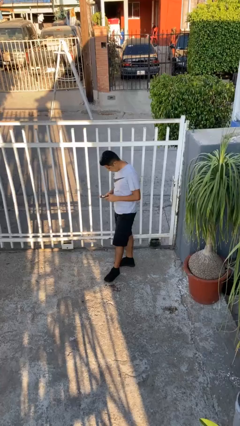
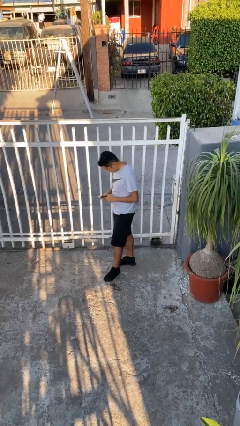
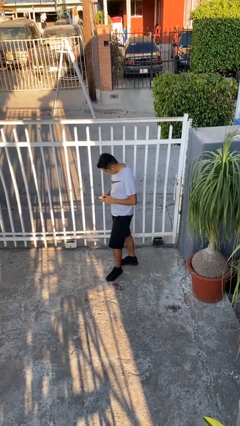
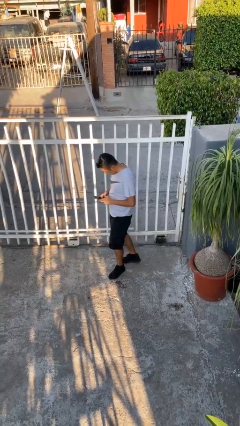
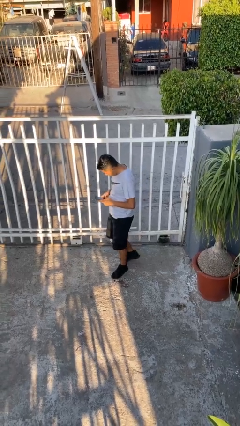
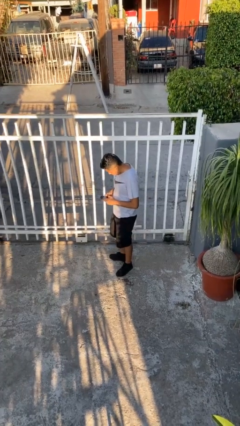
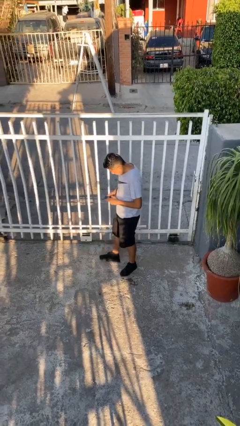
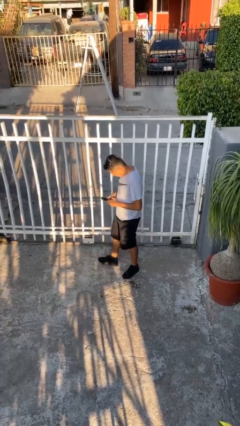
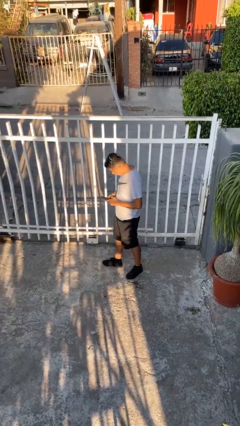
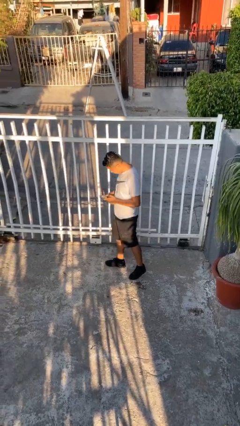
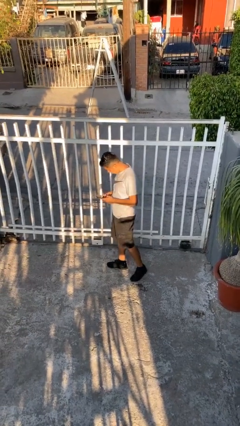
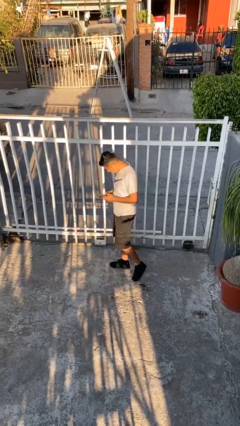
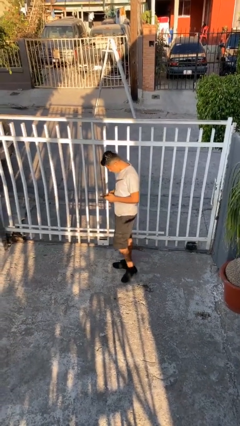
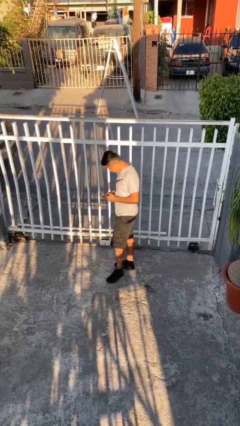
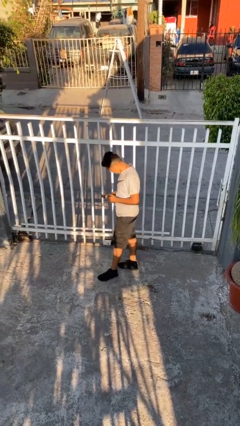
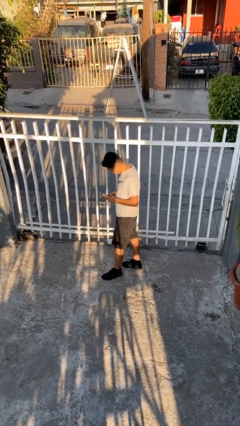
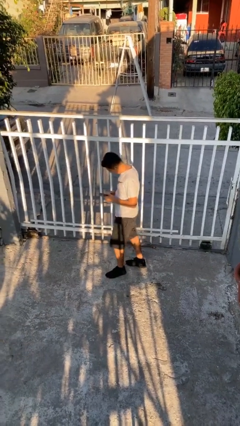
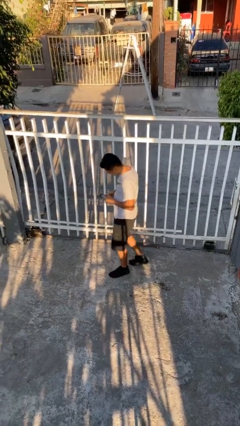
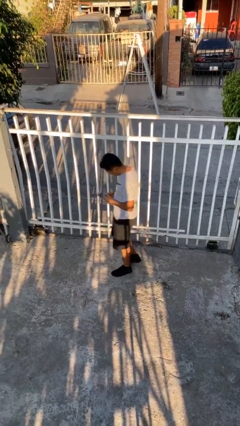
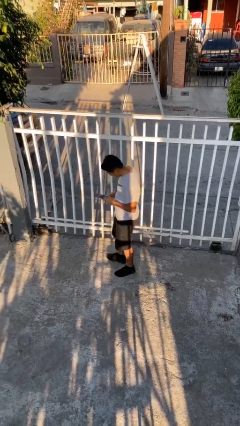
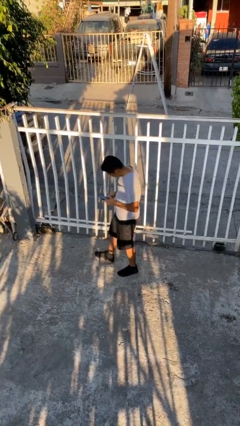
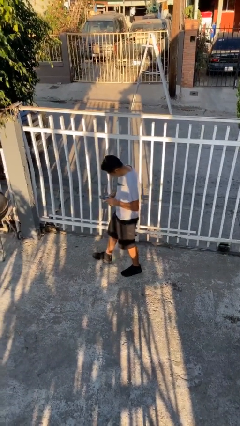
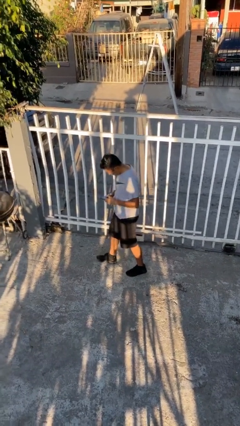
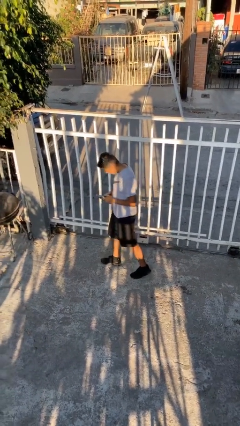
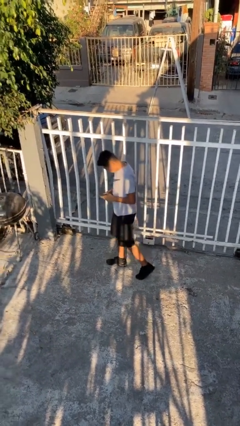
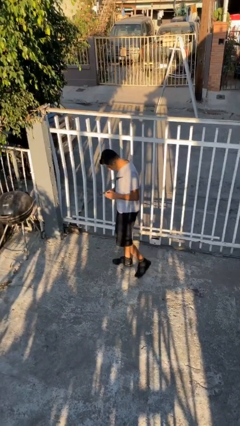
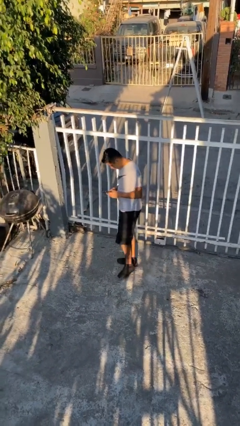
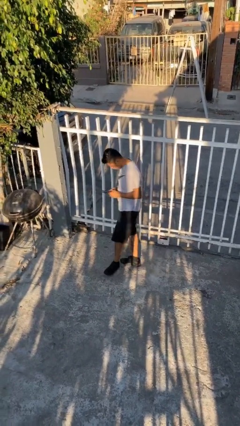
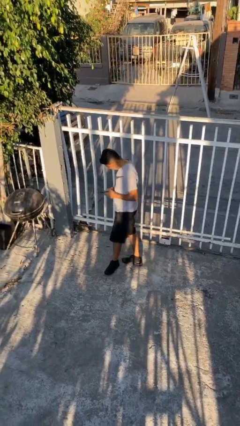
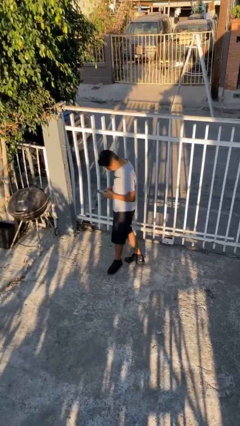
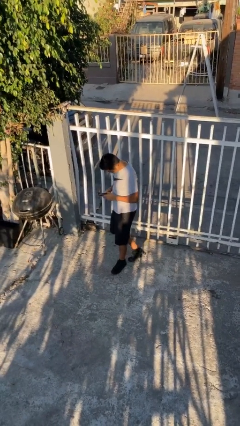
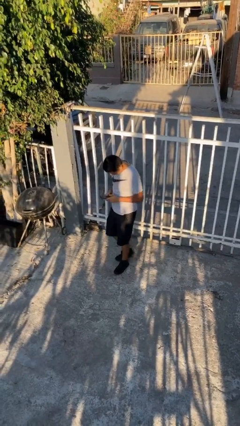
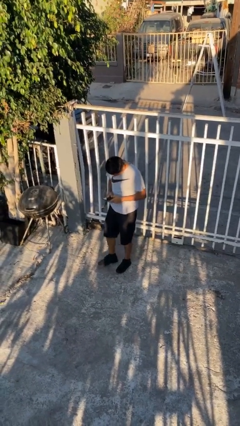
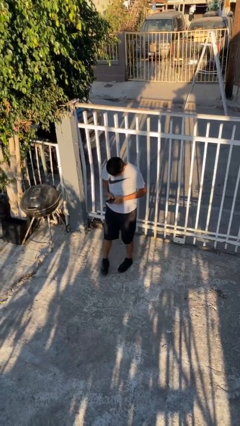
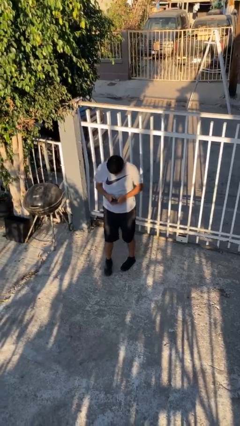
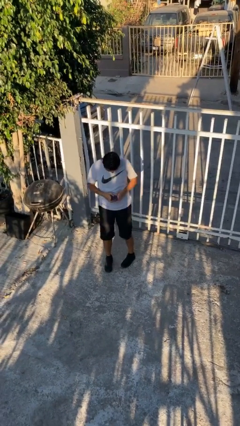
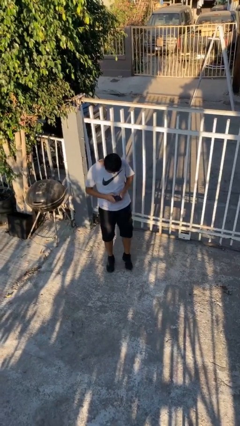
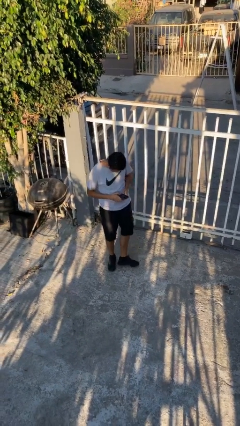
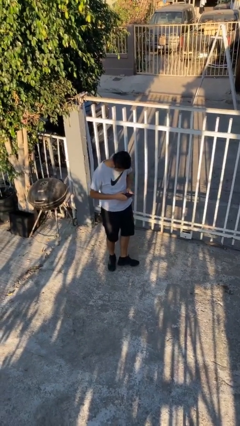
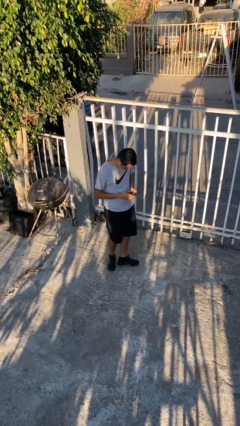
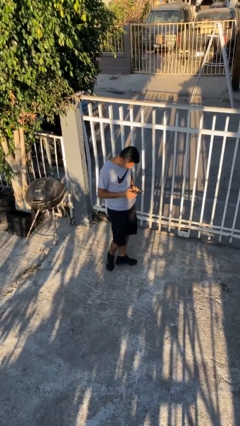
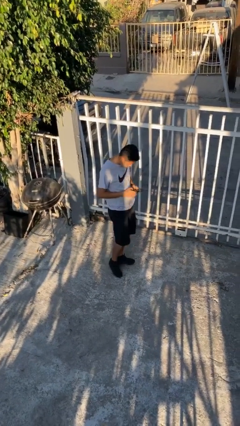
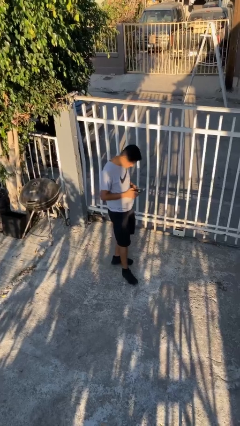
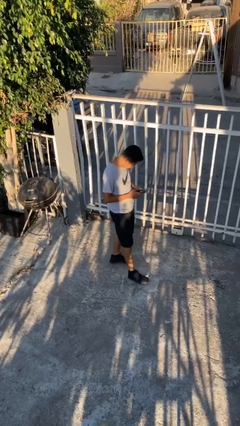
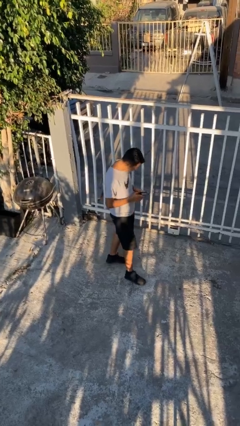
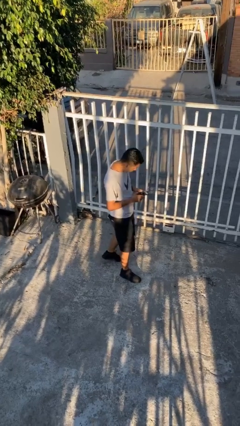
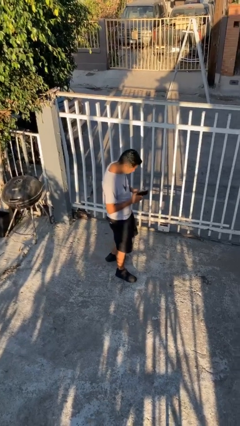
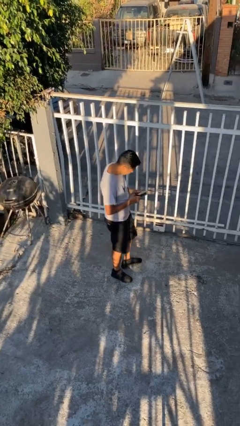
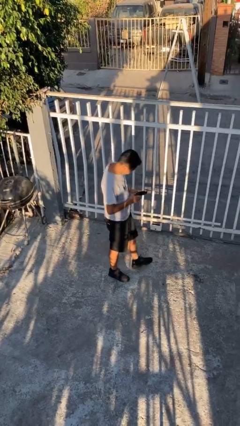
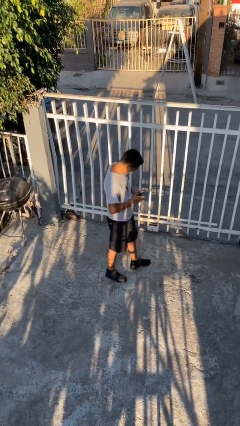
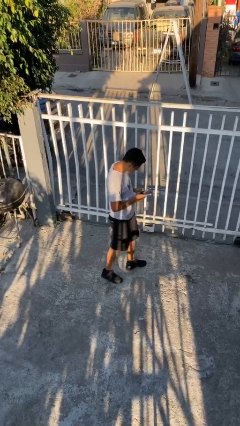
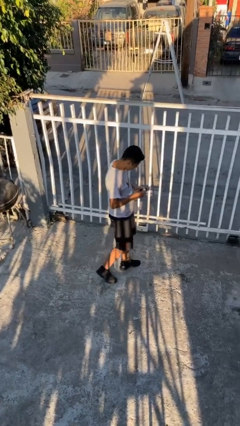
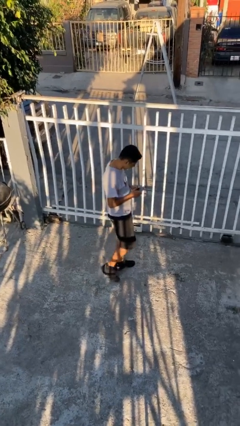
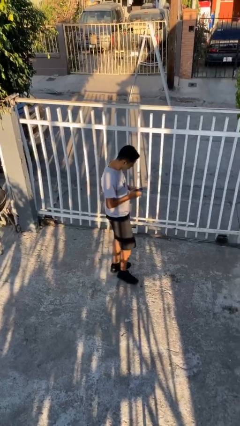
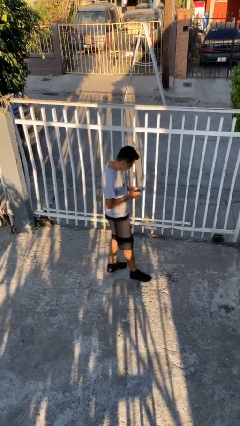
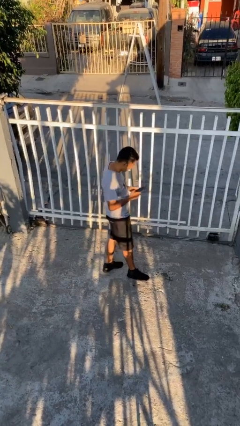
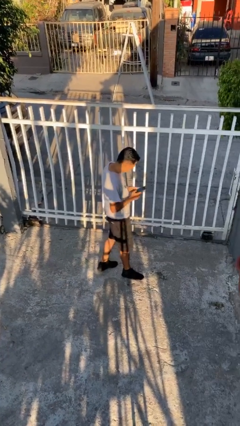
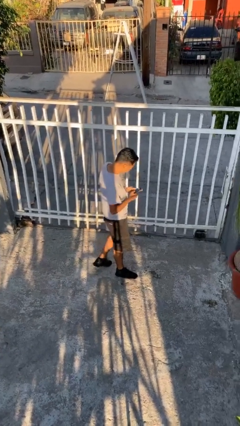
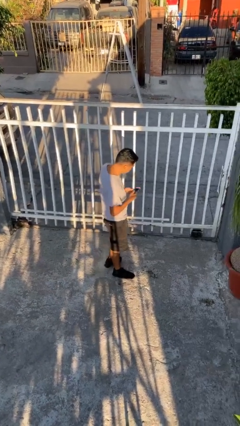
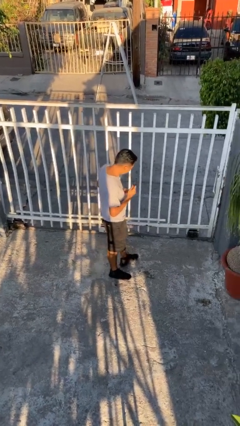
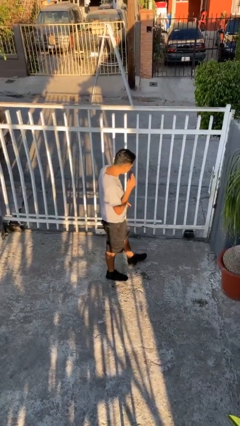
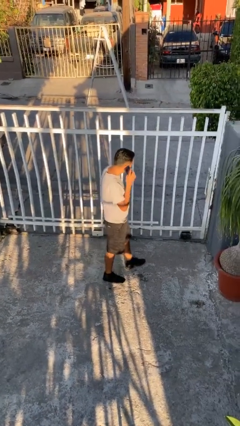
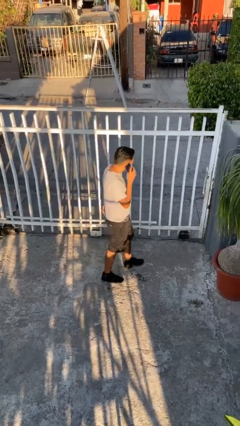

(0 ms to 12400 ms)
person texts on phone

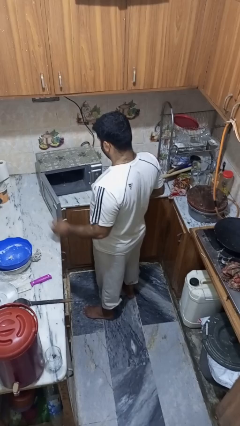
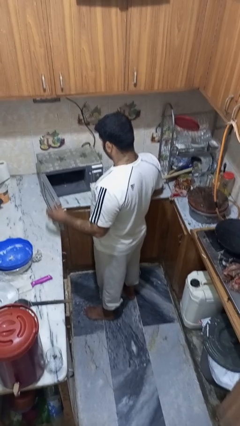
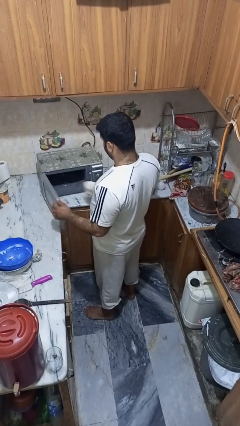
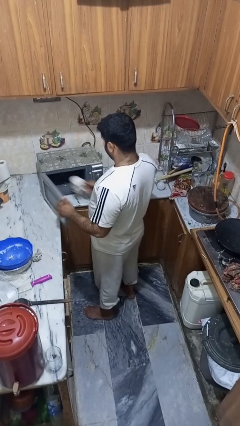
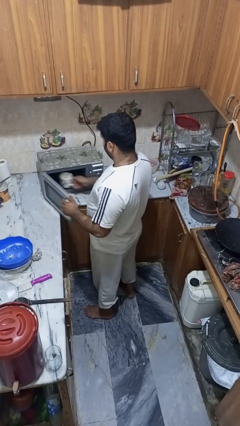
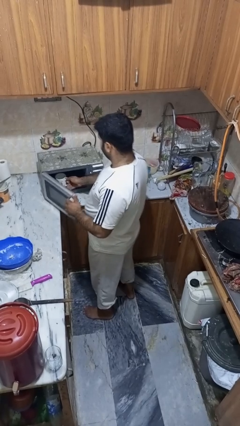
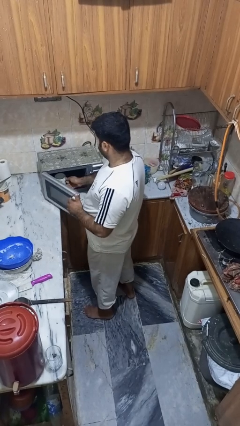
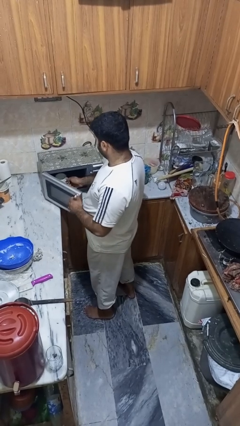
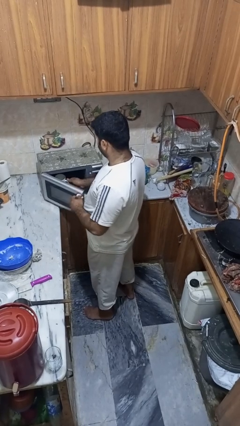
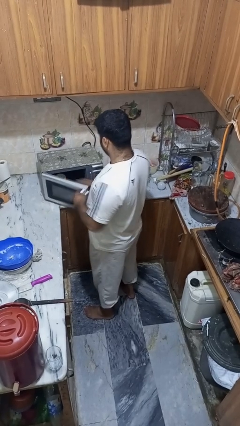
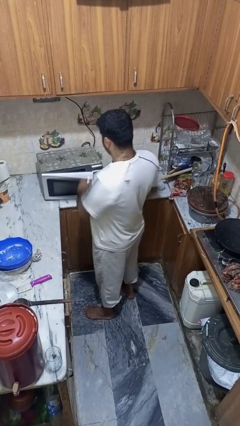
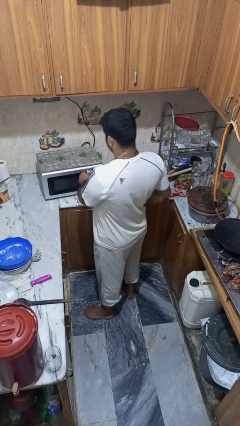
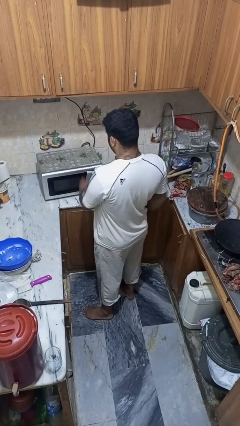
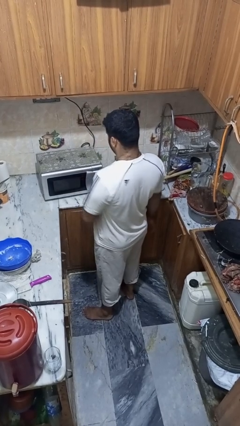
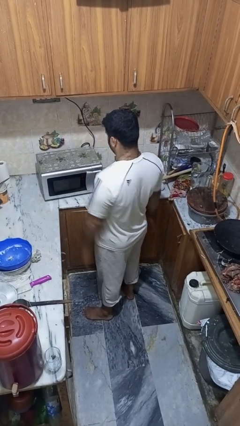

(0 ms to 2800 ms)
person puts object into microwave

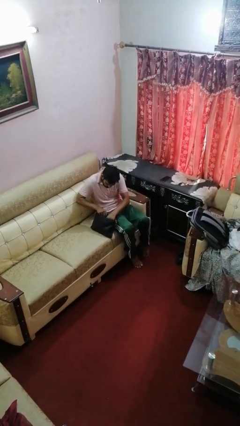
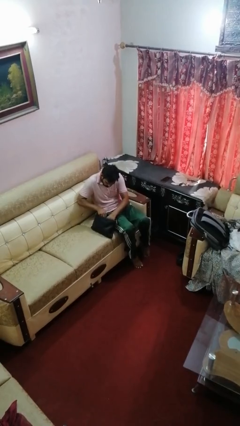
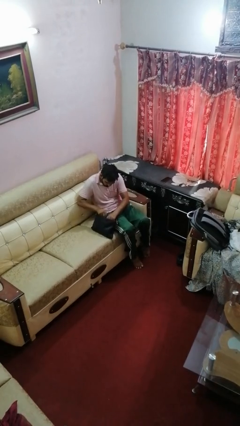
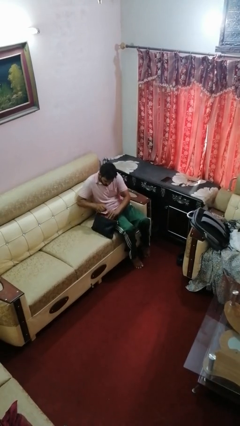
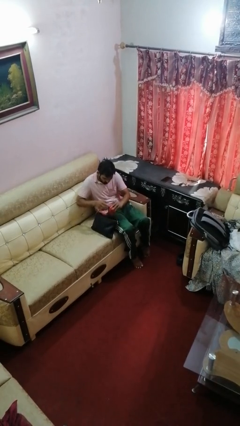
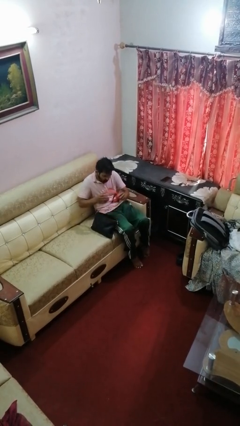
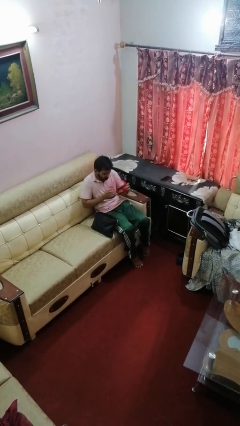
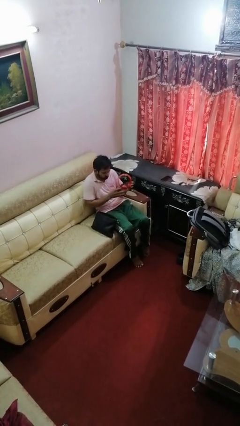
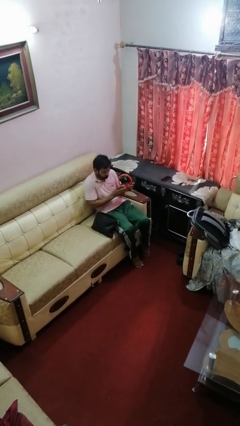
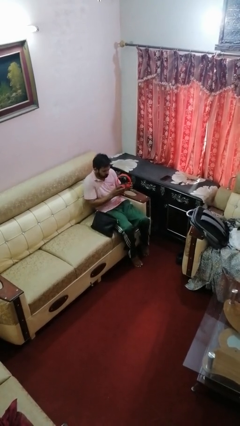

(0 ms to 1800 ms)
person takes object from purse

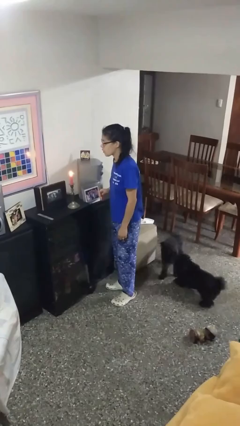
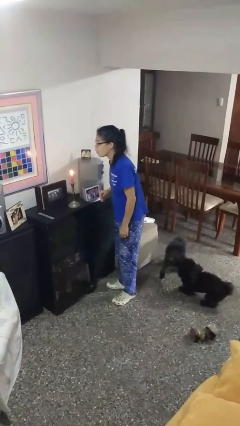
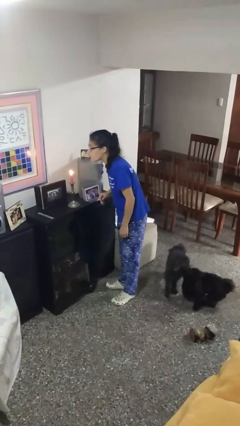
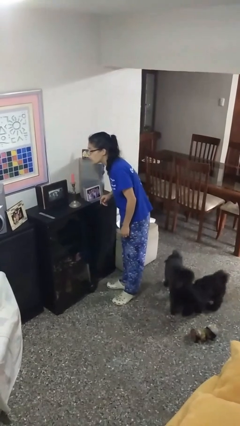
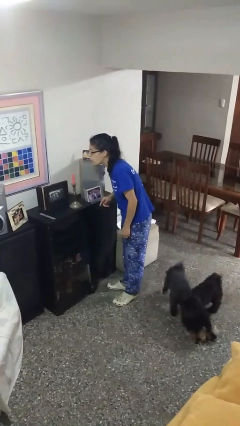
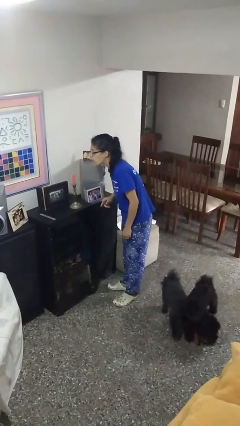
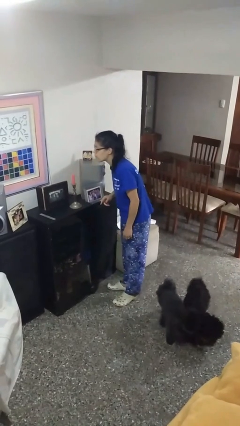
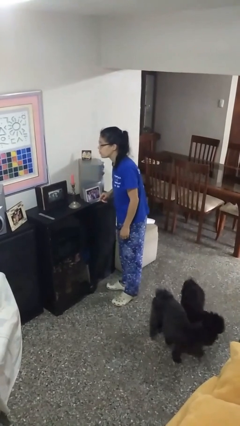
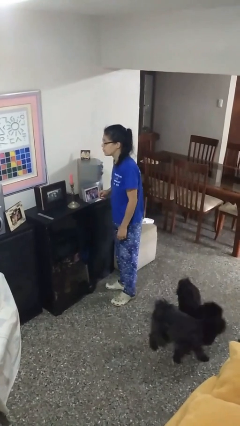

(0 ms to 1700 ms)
person extinguishes candle
